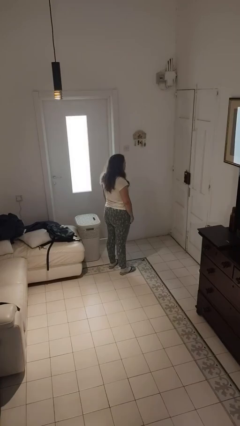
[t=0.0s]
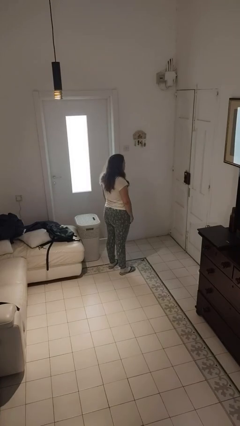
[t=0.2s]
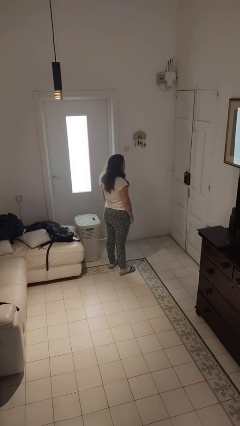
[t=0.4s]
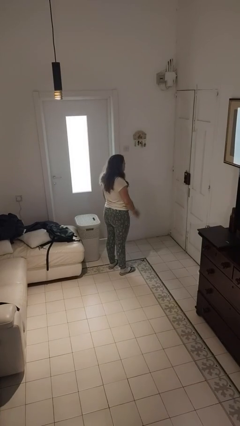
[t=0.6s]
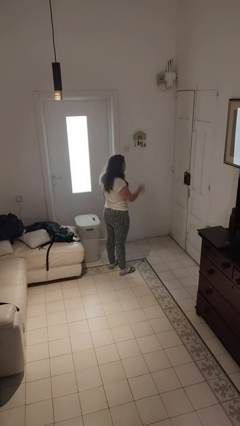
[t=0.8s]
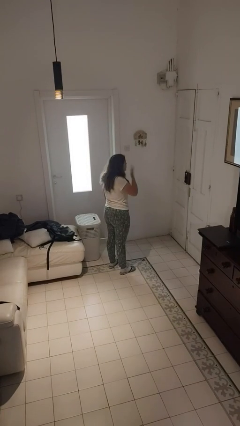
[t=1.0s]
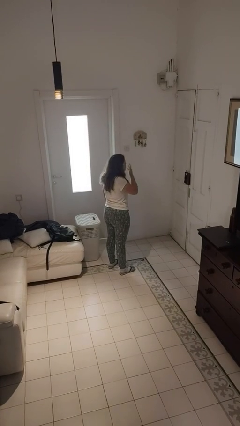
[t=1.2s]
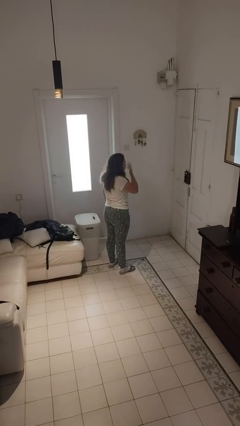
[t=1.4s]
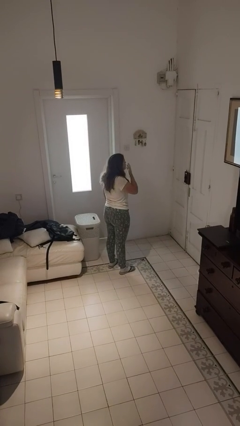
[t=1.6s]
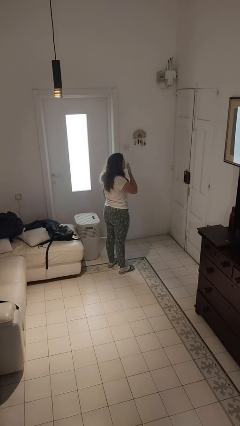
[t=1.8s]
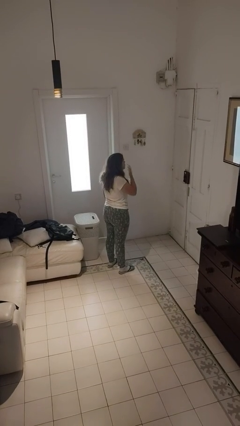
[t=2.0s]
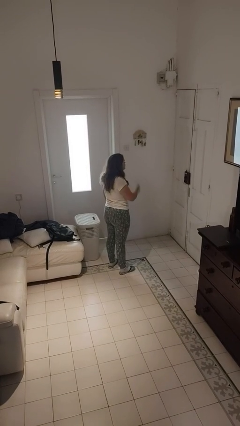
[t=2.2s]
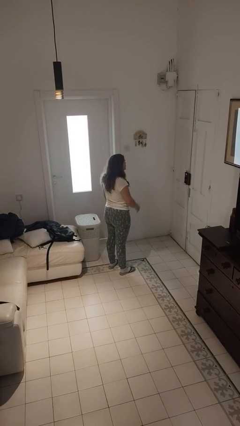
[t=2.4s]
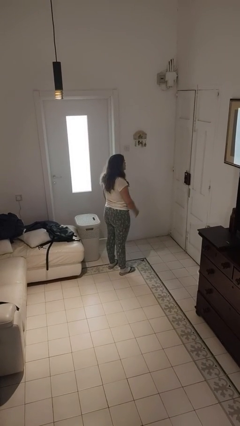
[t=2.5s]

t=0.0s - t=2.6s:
person yawns

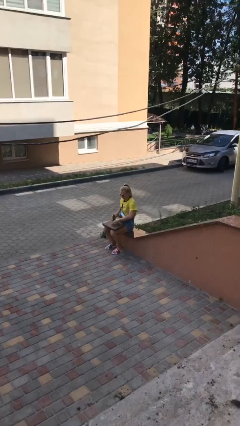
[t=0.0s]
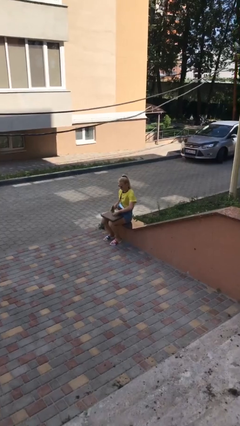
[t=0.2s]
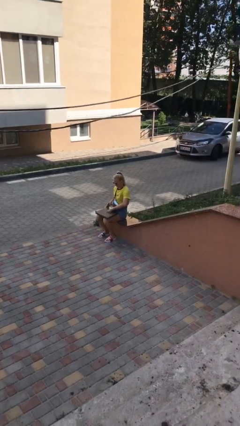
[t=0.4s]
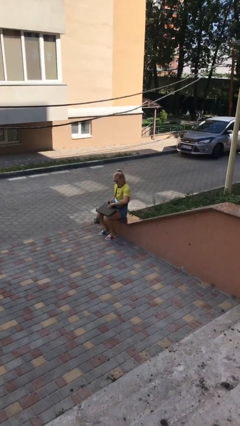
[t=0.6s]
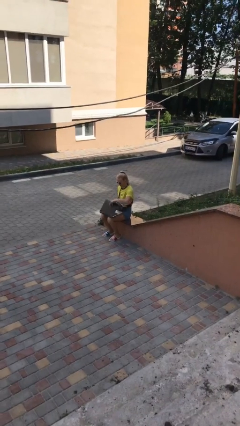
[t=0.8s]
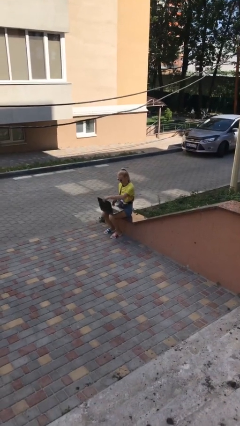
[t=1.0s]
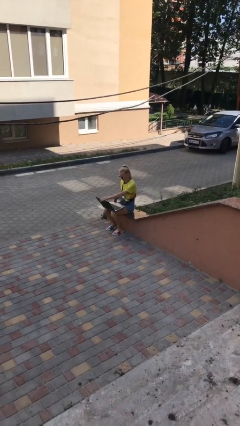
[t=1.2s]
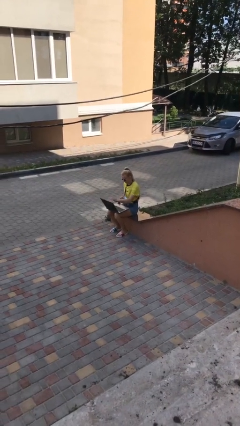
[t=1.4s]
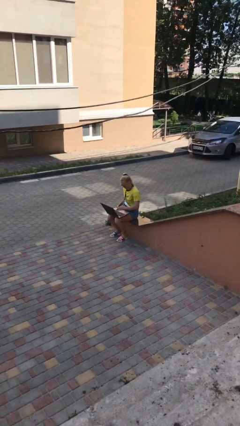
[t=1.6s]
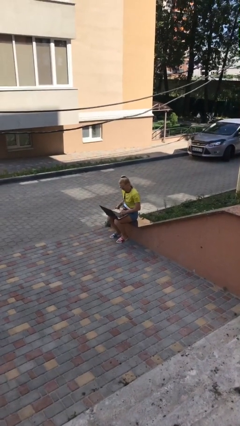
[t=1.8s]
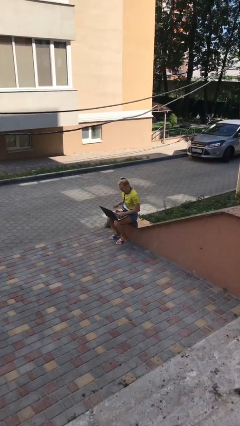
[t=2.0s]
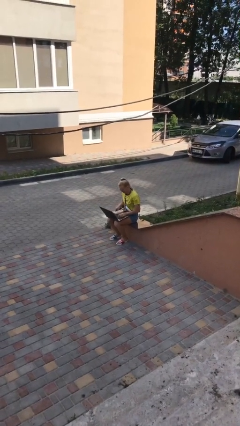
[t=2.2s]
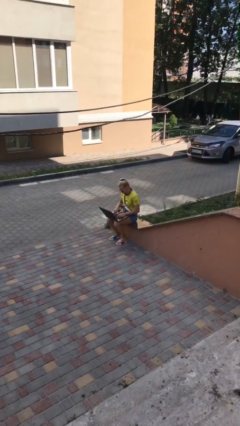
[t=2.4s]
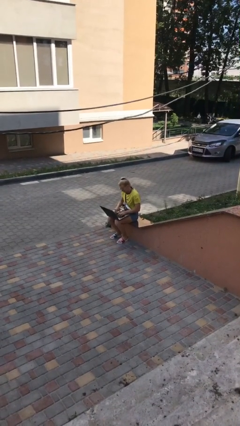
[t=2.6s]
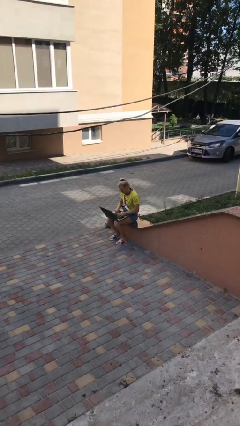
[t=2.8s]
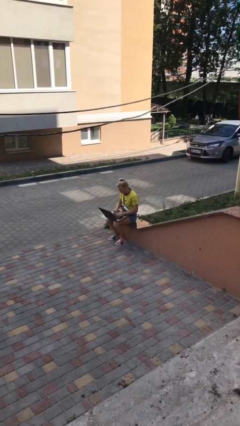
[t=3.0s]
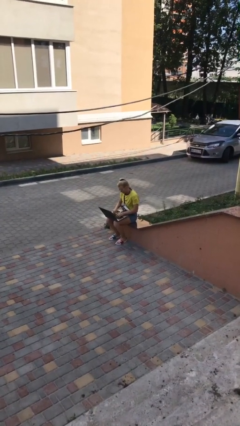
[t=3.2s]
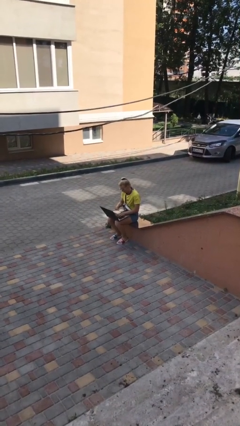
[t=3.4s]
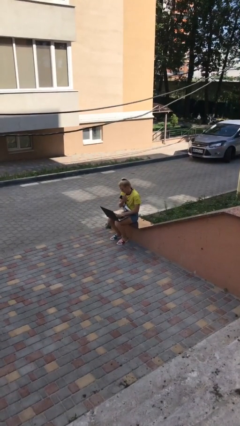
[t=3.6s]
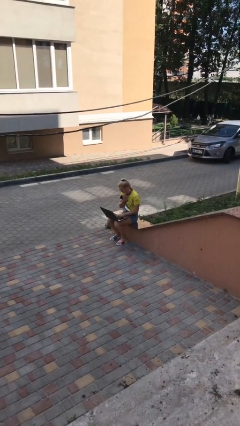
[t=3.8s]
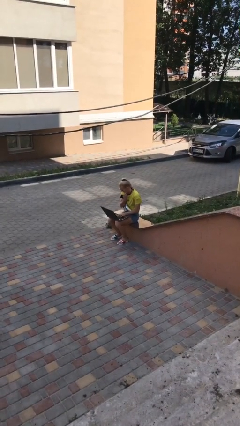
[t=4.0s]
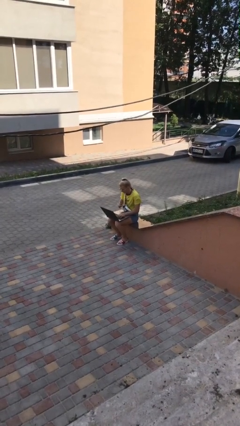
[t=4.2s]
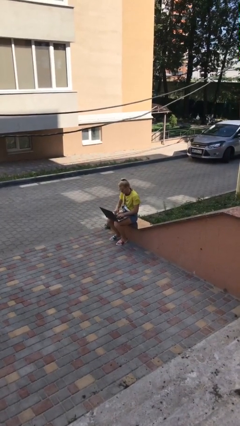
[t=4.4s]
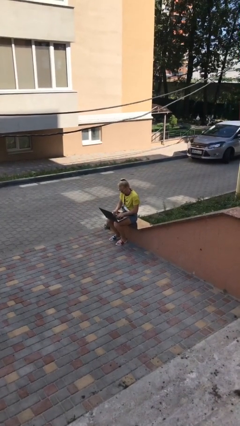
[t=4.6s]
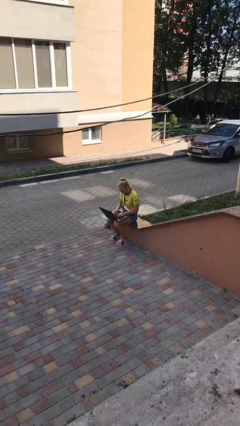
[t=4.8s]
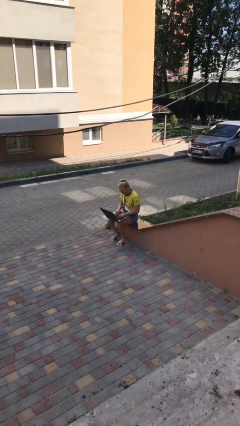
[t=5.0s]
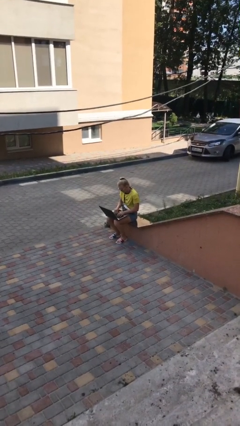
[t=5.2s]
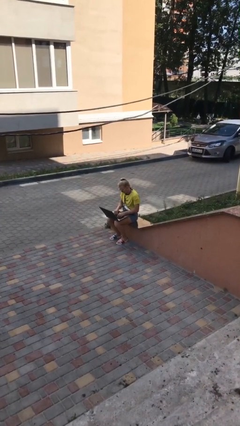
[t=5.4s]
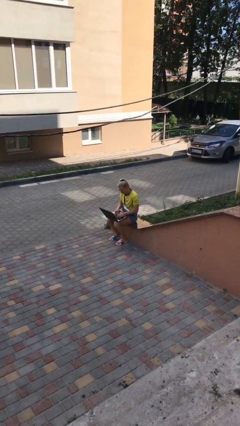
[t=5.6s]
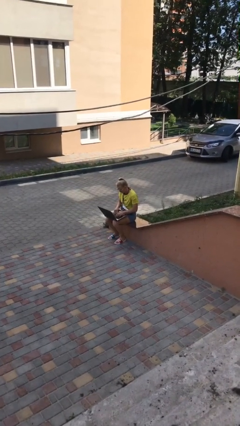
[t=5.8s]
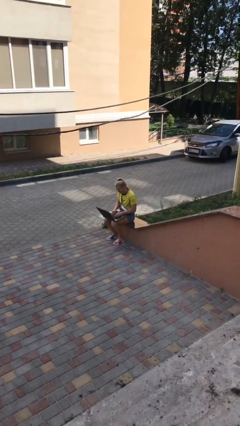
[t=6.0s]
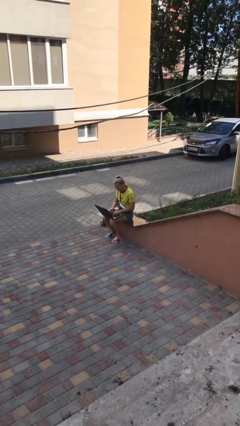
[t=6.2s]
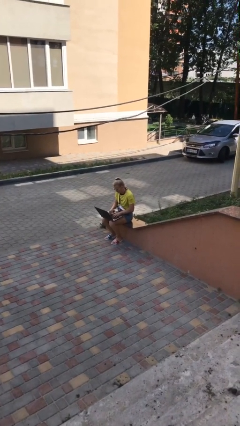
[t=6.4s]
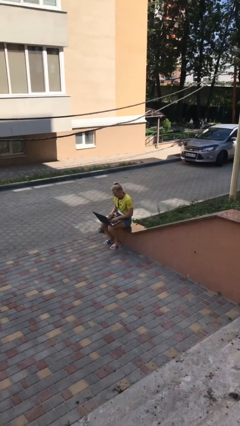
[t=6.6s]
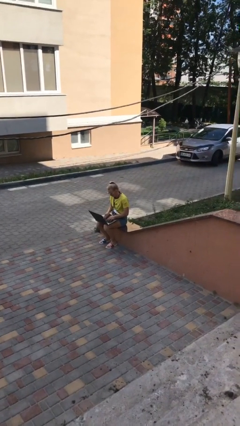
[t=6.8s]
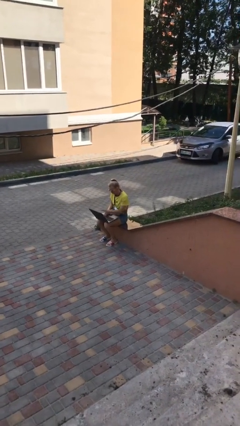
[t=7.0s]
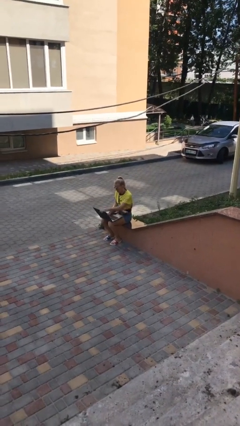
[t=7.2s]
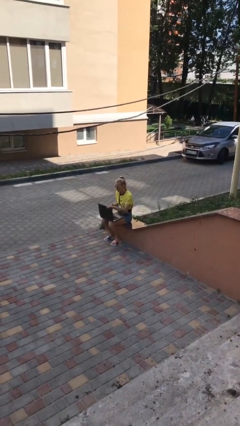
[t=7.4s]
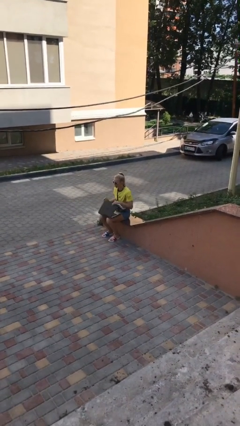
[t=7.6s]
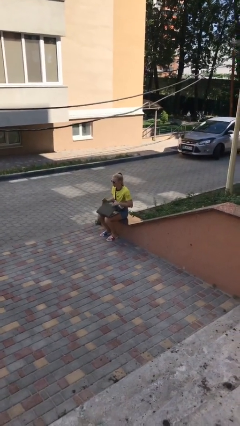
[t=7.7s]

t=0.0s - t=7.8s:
person interacts with laptop

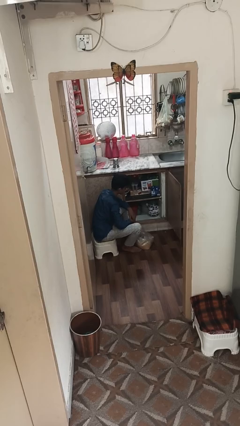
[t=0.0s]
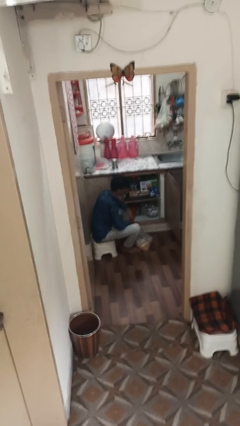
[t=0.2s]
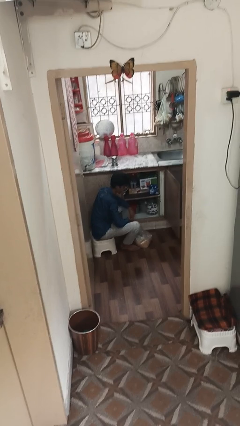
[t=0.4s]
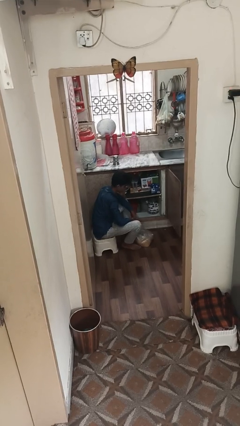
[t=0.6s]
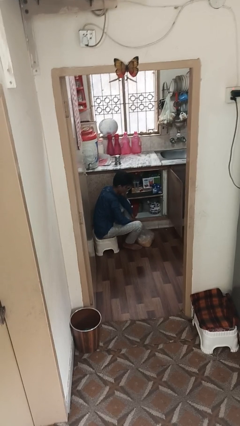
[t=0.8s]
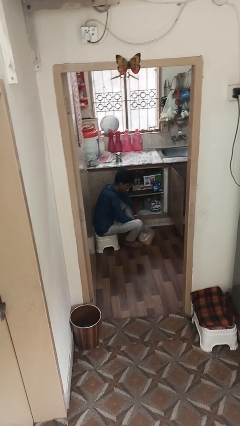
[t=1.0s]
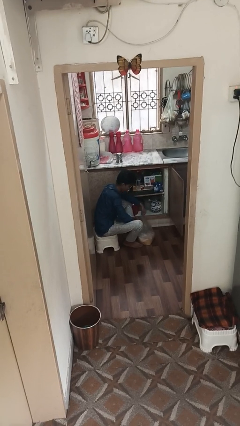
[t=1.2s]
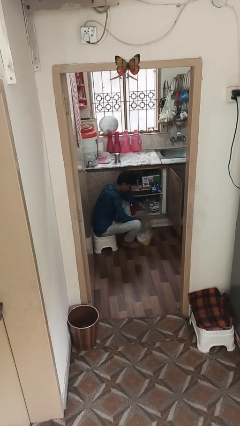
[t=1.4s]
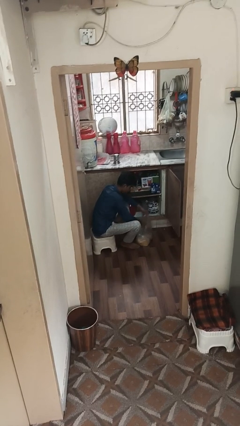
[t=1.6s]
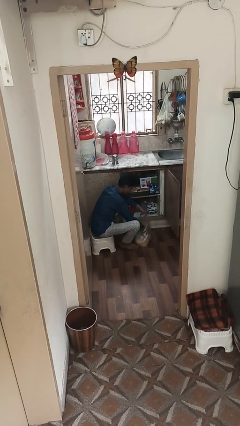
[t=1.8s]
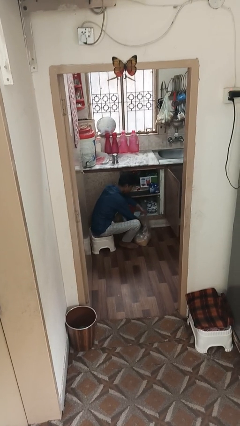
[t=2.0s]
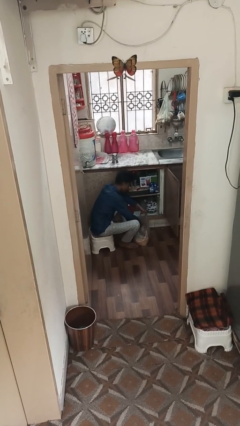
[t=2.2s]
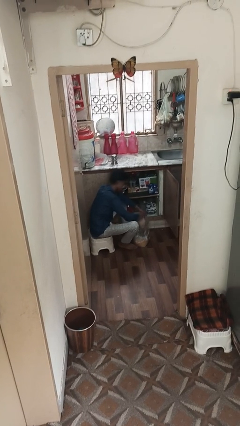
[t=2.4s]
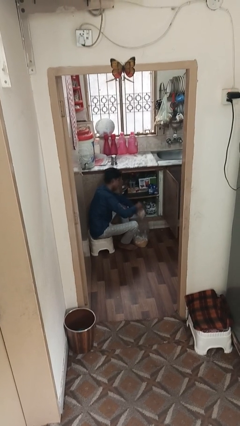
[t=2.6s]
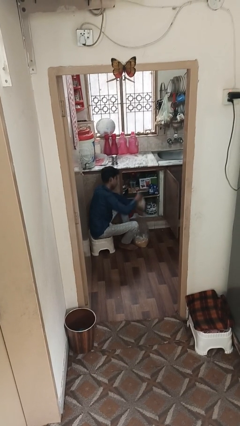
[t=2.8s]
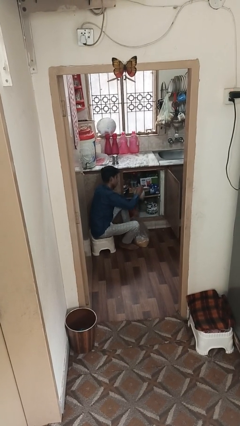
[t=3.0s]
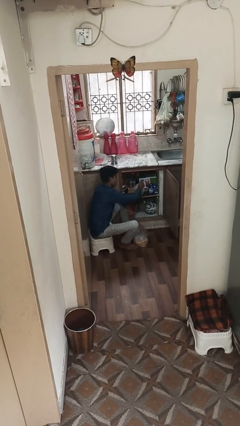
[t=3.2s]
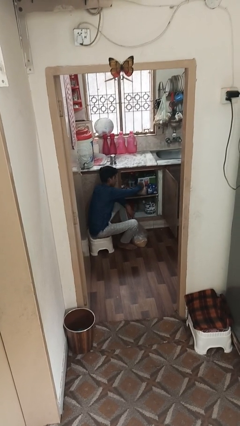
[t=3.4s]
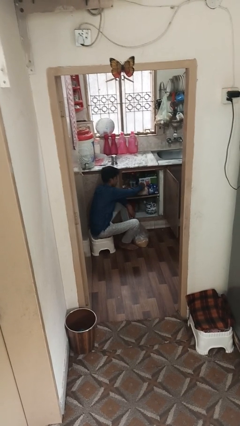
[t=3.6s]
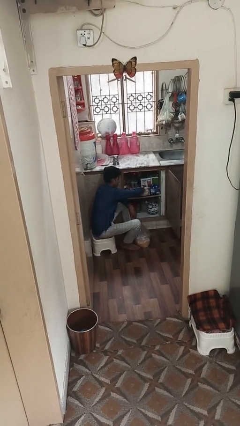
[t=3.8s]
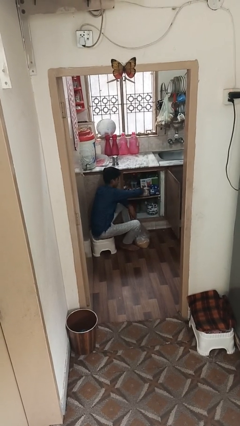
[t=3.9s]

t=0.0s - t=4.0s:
person loads groceries into cabinet

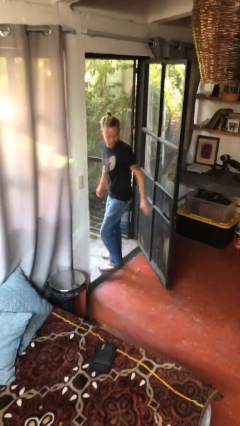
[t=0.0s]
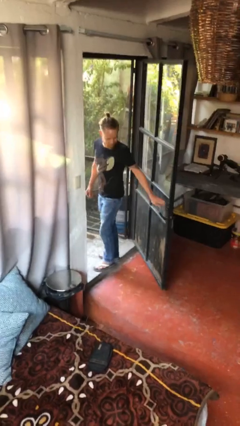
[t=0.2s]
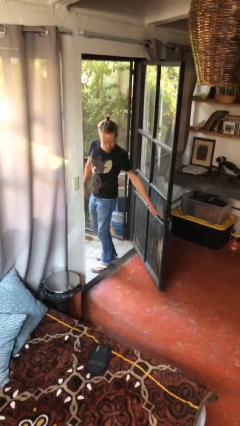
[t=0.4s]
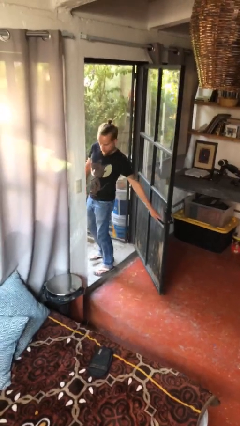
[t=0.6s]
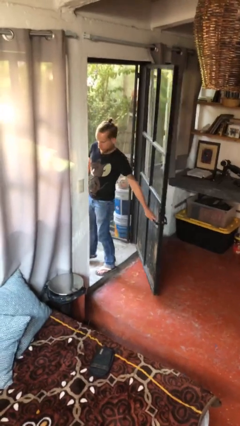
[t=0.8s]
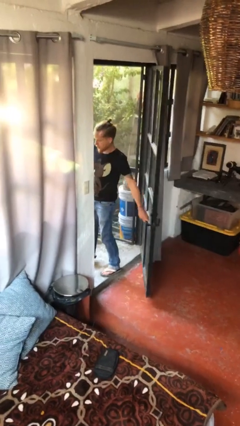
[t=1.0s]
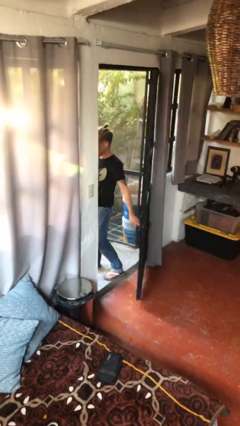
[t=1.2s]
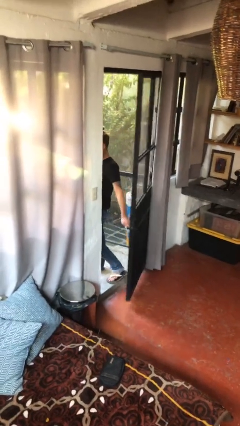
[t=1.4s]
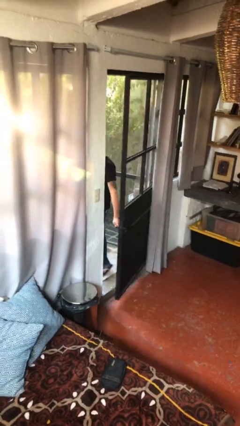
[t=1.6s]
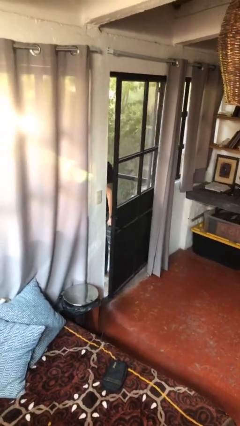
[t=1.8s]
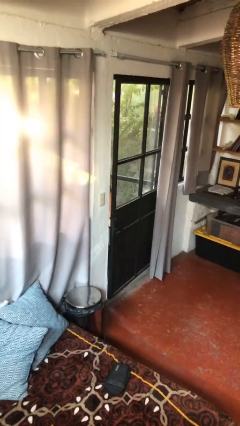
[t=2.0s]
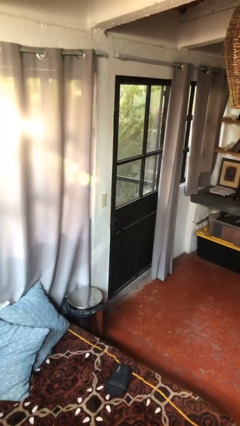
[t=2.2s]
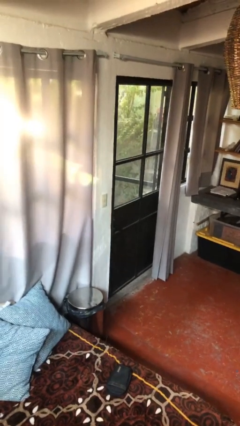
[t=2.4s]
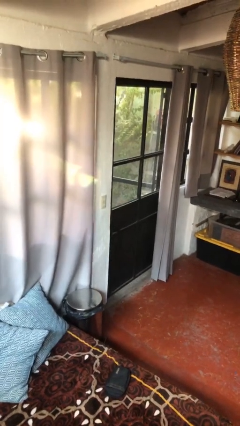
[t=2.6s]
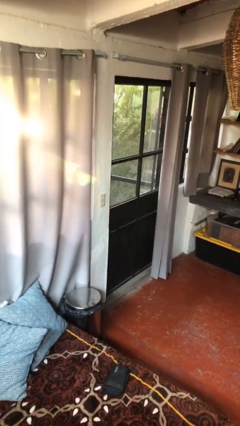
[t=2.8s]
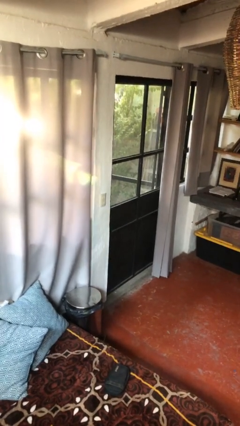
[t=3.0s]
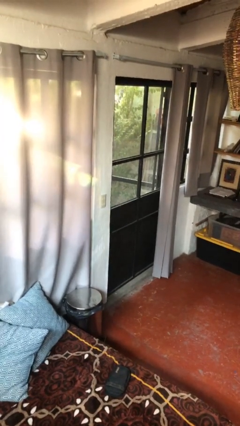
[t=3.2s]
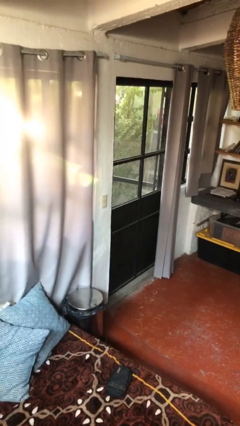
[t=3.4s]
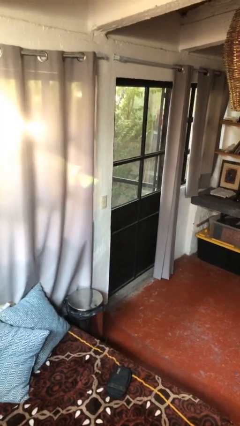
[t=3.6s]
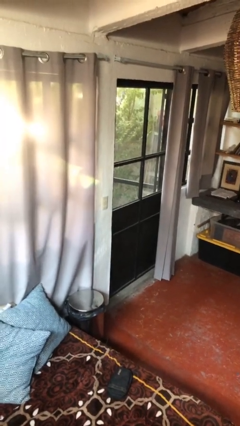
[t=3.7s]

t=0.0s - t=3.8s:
person closes facility door
